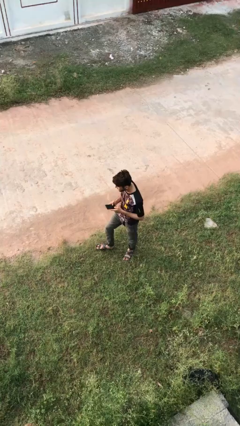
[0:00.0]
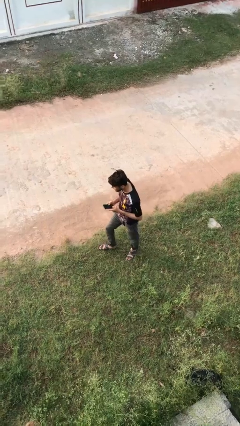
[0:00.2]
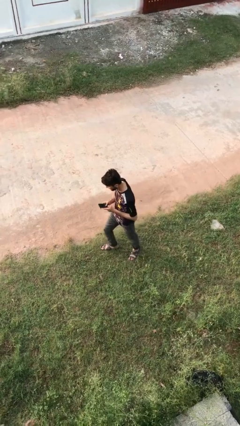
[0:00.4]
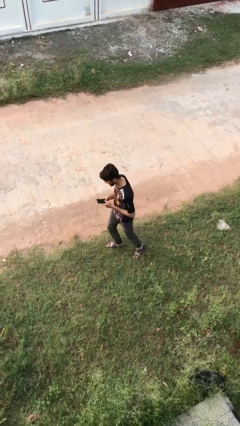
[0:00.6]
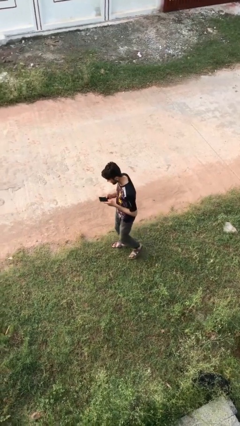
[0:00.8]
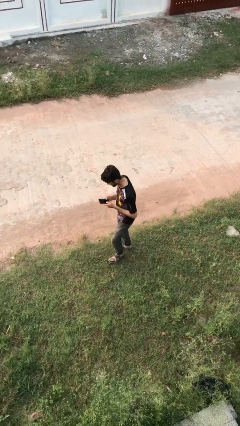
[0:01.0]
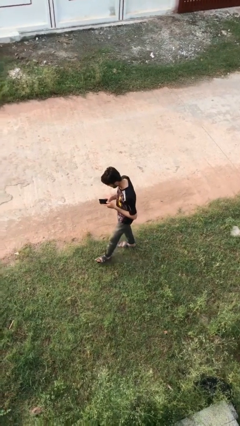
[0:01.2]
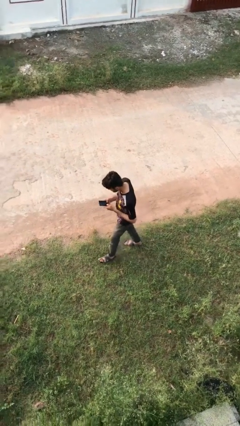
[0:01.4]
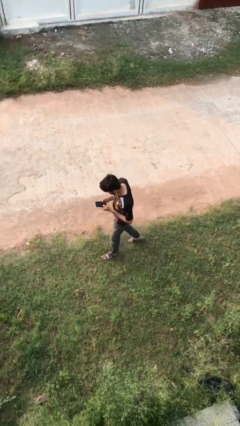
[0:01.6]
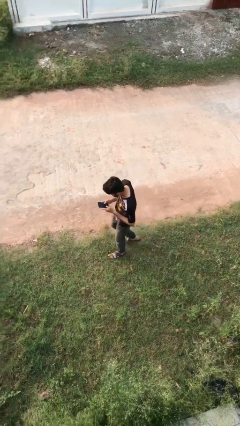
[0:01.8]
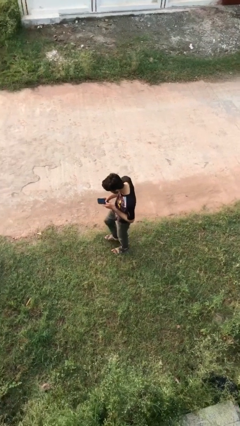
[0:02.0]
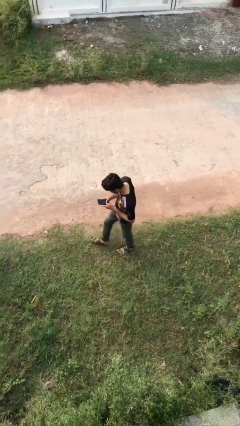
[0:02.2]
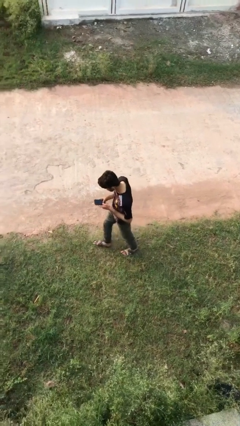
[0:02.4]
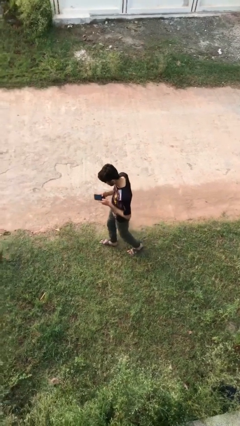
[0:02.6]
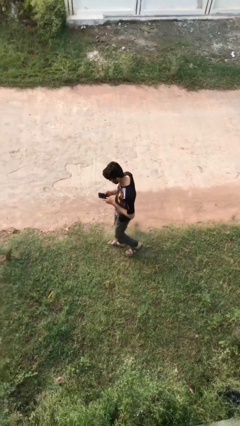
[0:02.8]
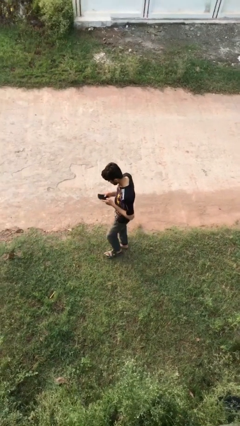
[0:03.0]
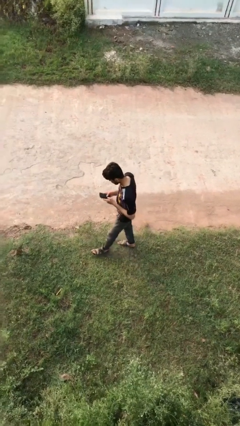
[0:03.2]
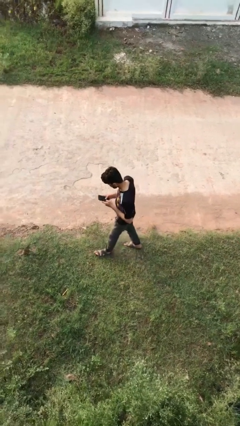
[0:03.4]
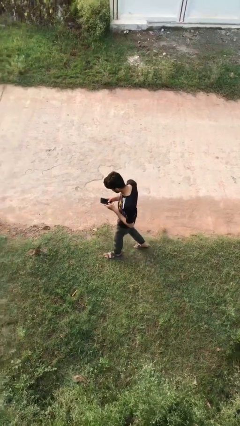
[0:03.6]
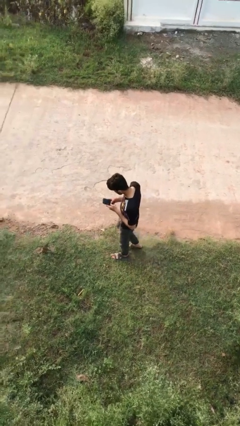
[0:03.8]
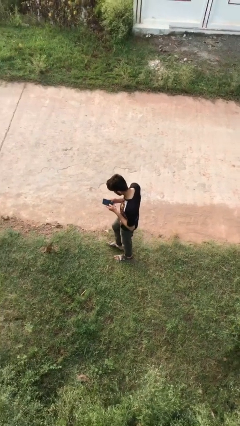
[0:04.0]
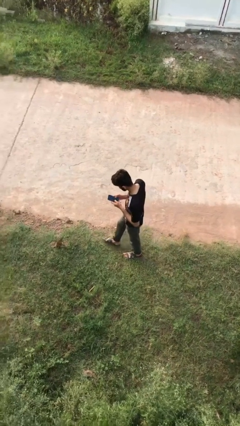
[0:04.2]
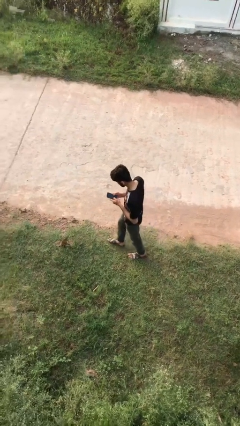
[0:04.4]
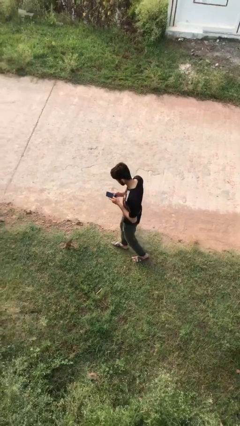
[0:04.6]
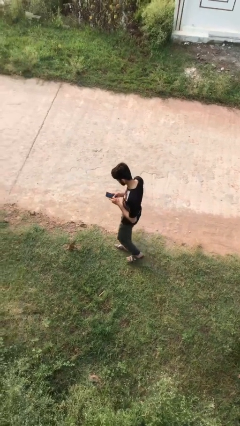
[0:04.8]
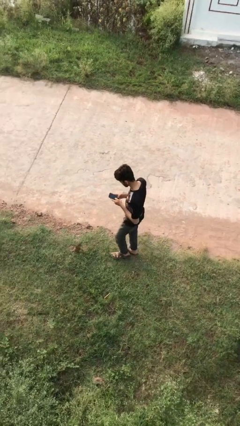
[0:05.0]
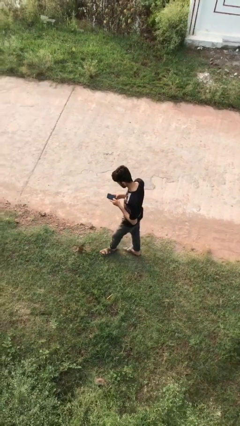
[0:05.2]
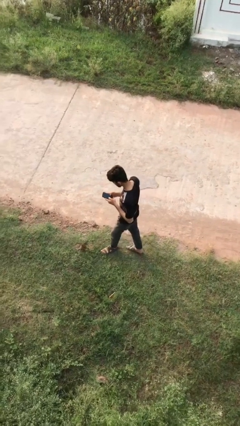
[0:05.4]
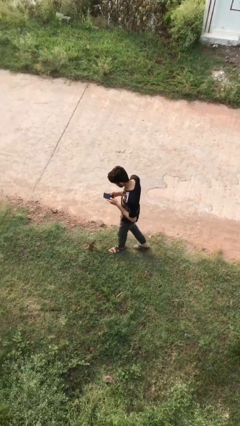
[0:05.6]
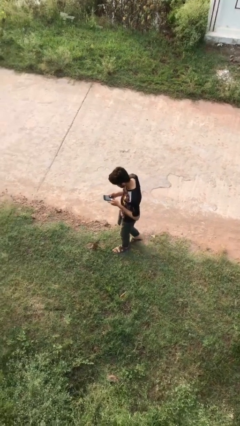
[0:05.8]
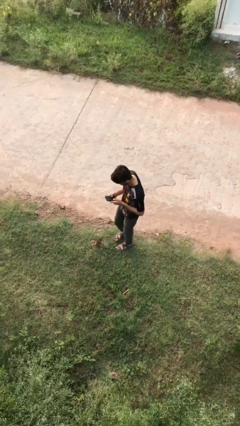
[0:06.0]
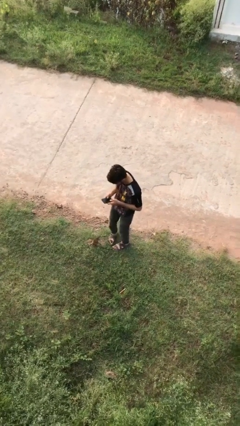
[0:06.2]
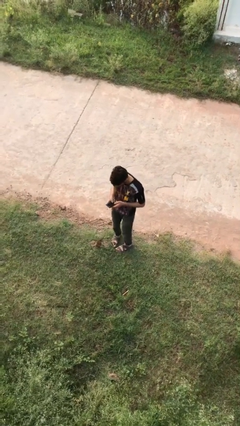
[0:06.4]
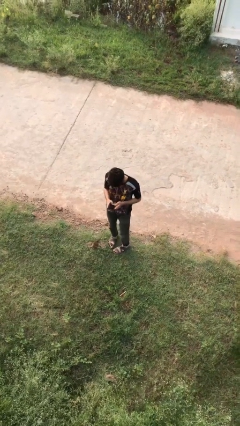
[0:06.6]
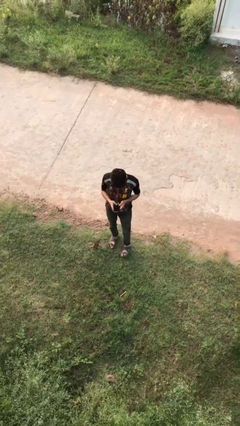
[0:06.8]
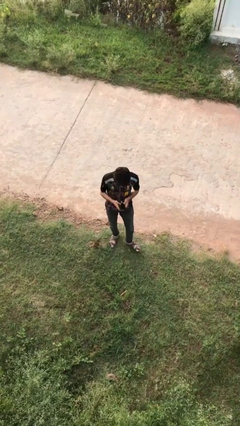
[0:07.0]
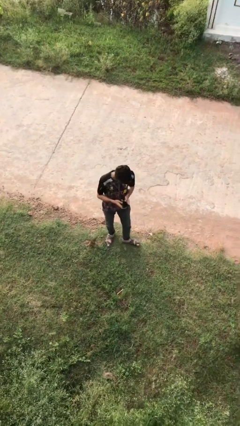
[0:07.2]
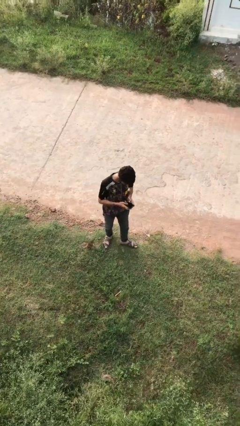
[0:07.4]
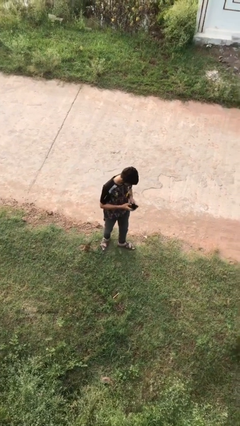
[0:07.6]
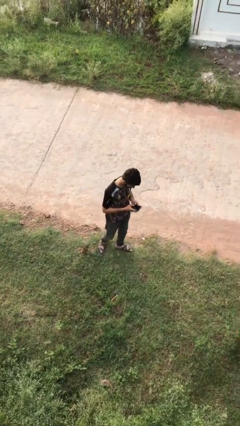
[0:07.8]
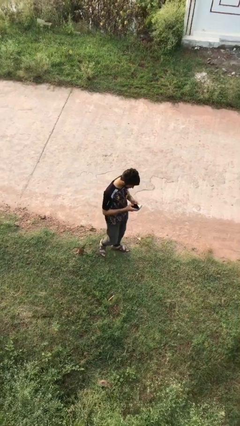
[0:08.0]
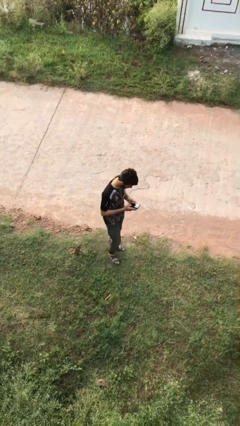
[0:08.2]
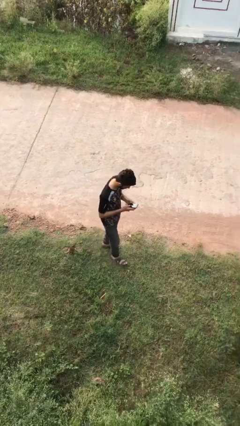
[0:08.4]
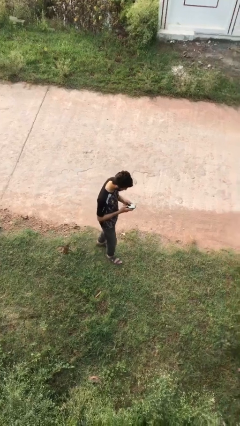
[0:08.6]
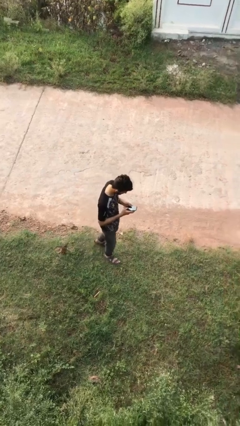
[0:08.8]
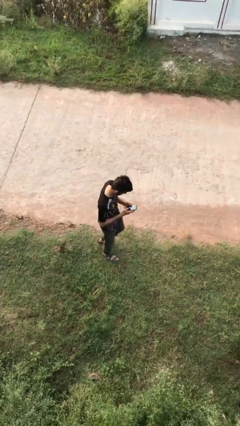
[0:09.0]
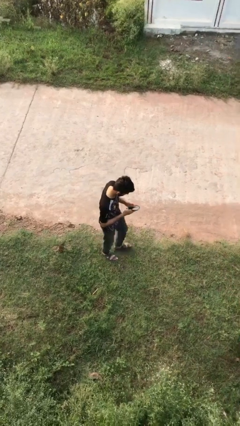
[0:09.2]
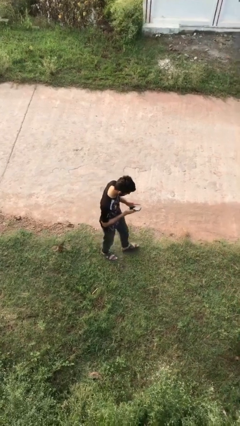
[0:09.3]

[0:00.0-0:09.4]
person texts on phone

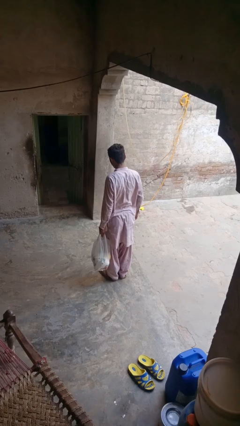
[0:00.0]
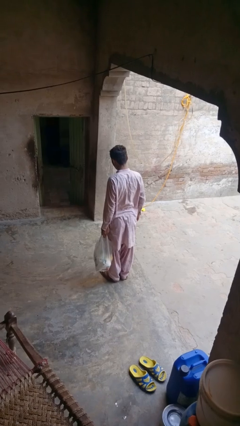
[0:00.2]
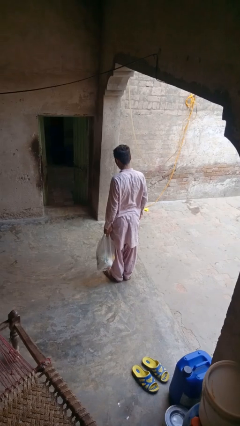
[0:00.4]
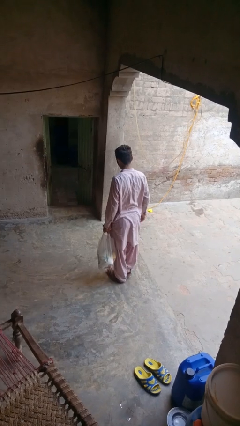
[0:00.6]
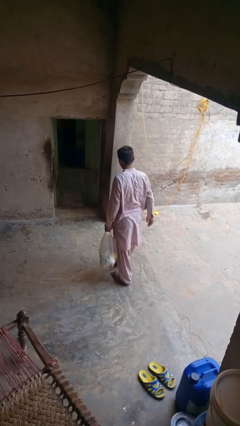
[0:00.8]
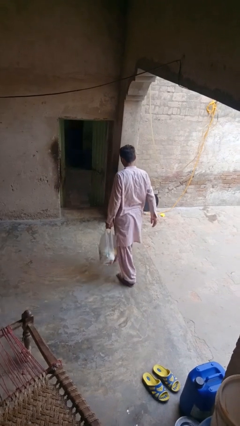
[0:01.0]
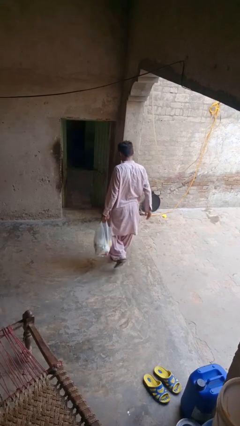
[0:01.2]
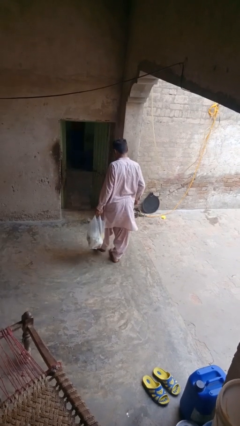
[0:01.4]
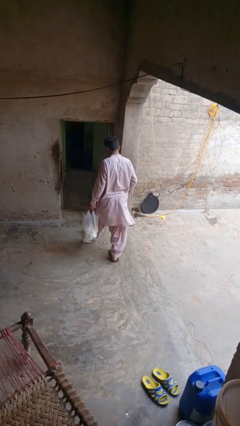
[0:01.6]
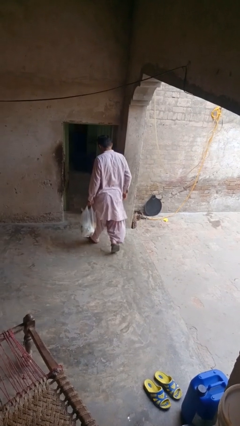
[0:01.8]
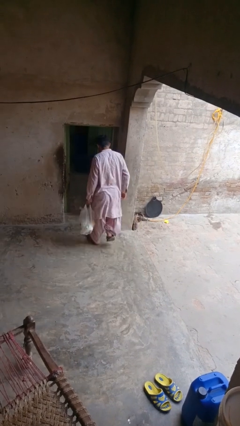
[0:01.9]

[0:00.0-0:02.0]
person carries groceries

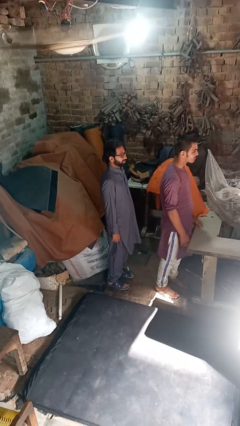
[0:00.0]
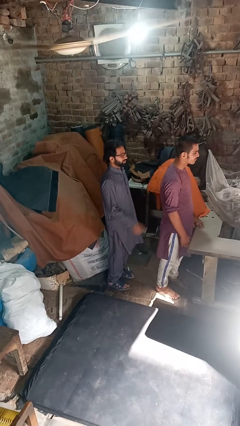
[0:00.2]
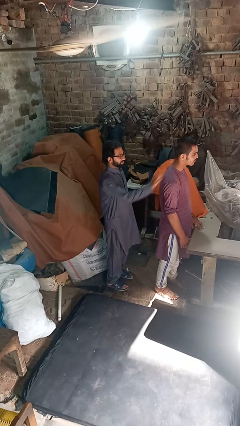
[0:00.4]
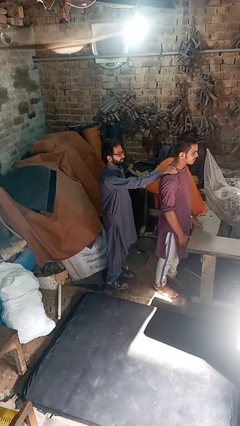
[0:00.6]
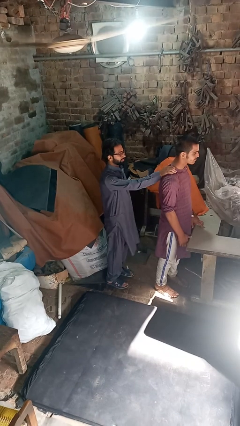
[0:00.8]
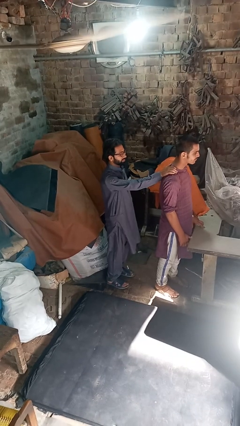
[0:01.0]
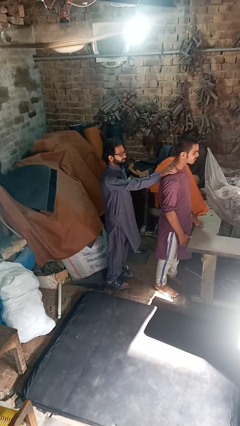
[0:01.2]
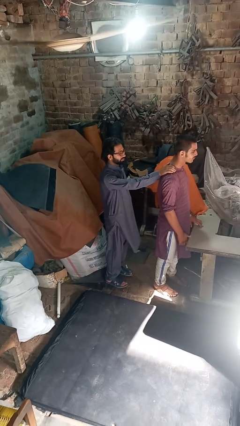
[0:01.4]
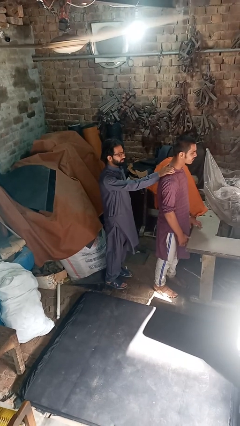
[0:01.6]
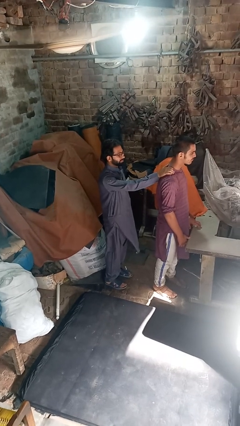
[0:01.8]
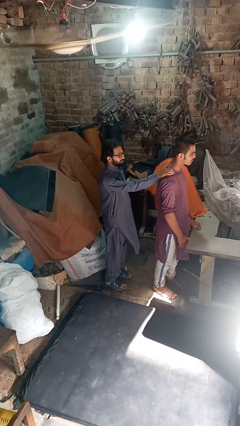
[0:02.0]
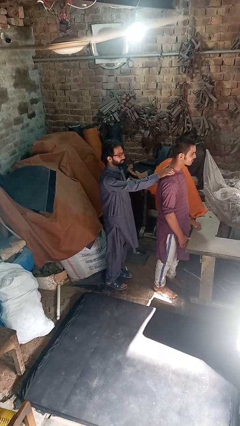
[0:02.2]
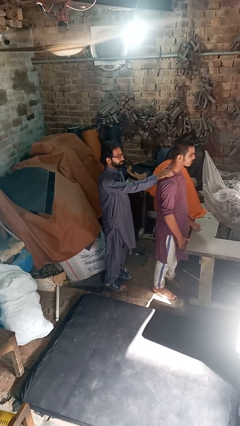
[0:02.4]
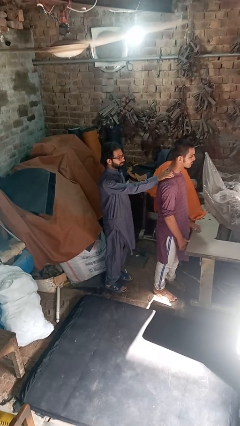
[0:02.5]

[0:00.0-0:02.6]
person grabs person by shoulder

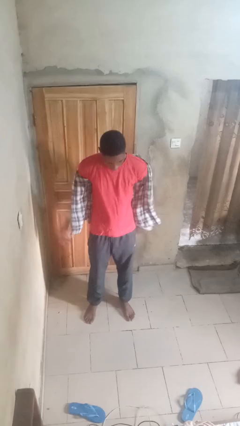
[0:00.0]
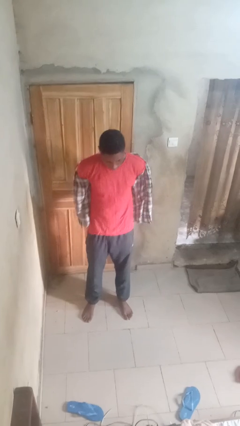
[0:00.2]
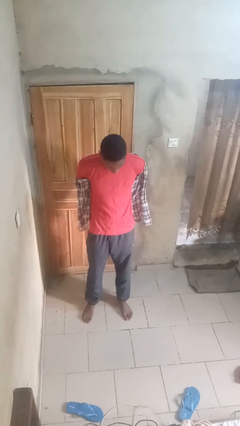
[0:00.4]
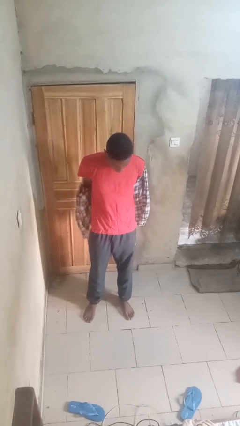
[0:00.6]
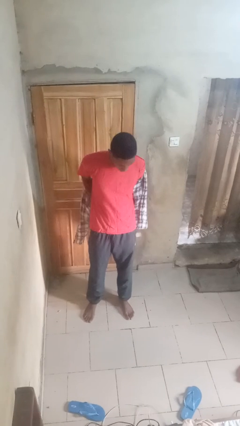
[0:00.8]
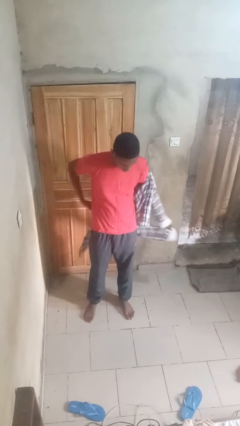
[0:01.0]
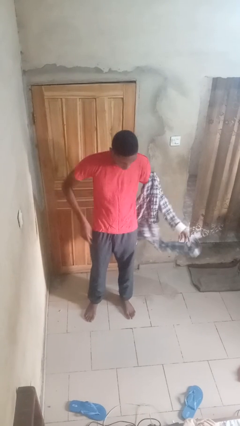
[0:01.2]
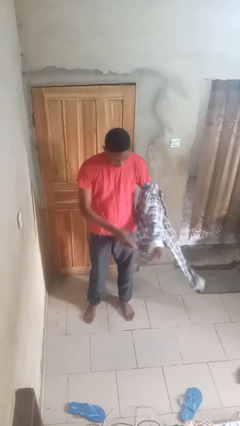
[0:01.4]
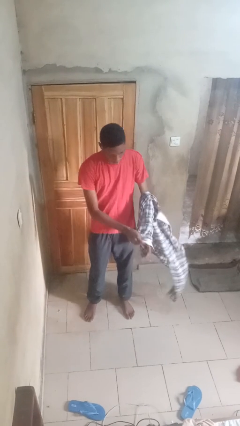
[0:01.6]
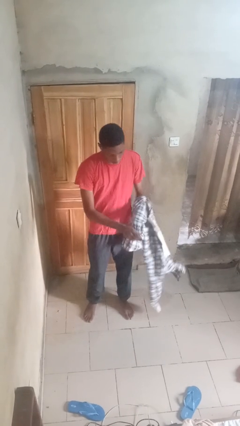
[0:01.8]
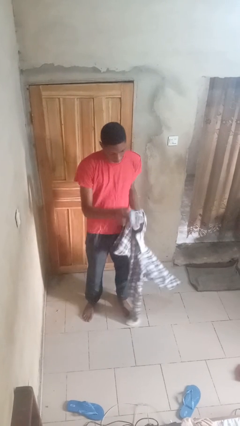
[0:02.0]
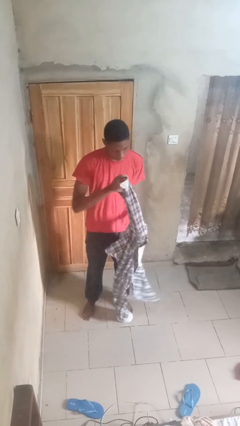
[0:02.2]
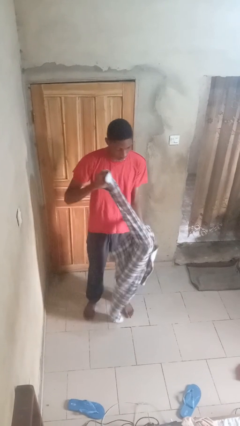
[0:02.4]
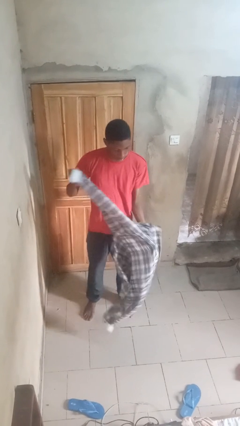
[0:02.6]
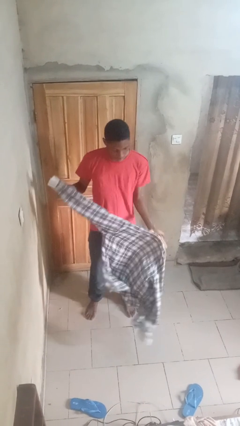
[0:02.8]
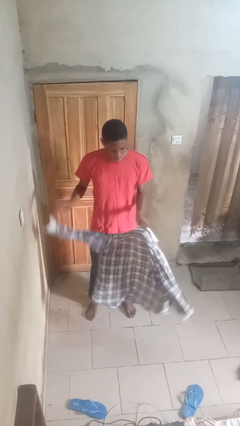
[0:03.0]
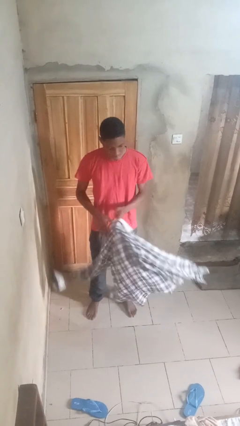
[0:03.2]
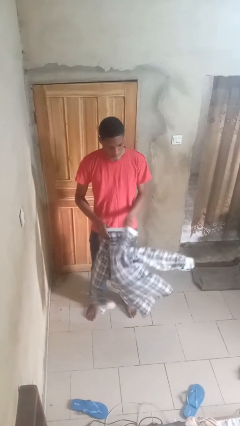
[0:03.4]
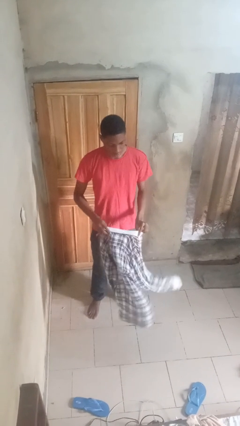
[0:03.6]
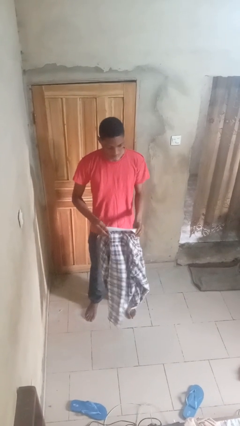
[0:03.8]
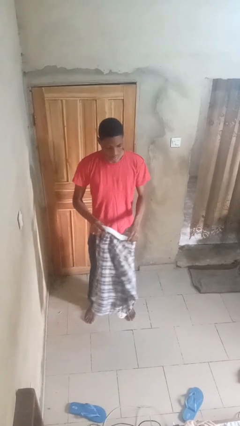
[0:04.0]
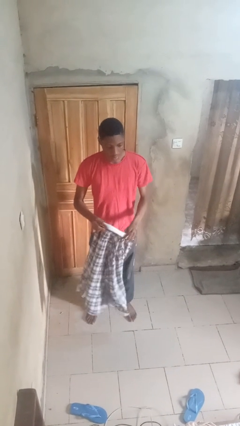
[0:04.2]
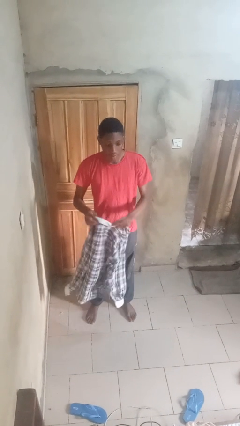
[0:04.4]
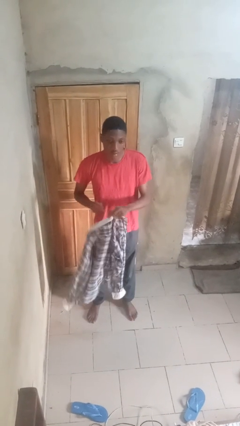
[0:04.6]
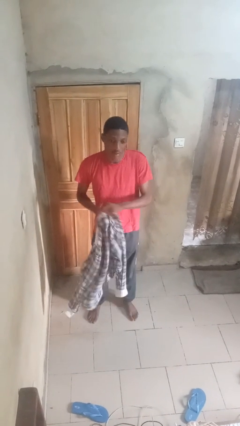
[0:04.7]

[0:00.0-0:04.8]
person takes off shirt
